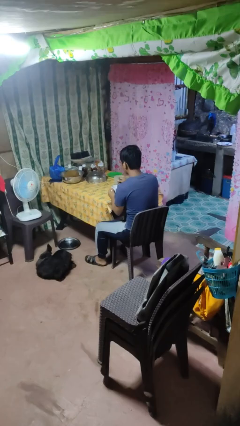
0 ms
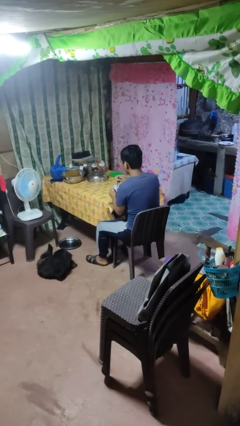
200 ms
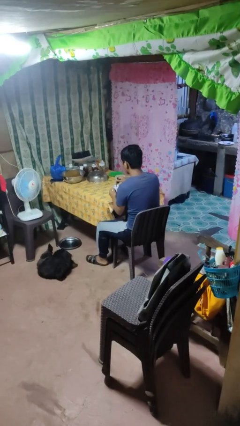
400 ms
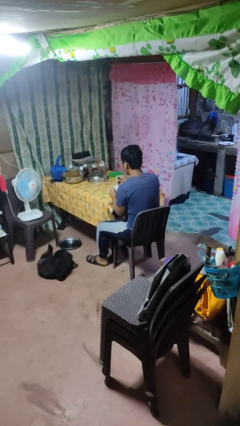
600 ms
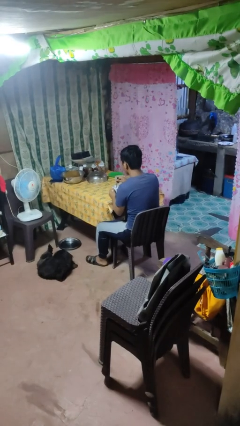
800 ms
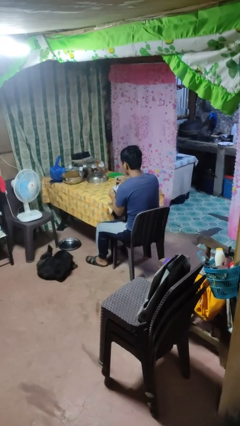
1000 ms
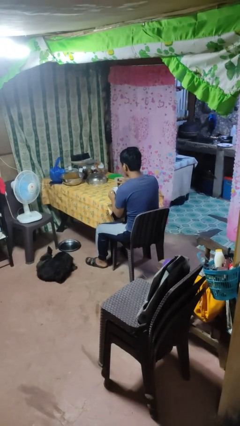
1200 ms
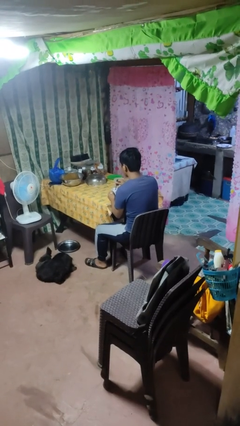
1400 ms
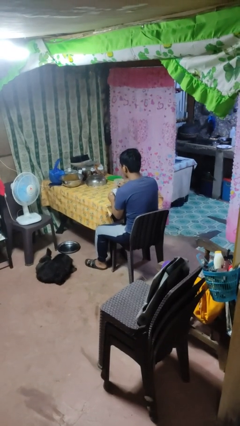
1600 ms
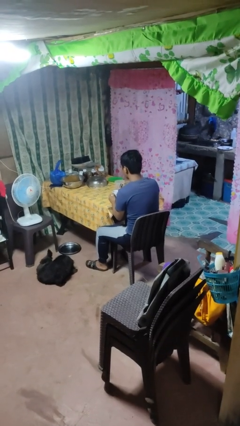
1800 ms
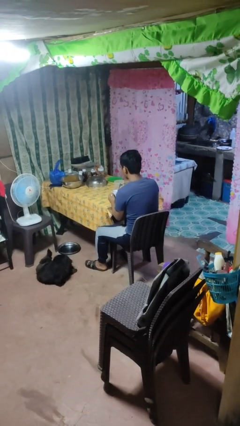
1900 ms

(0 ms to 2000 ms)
person stirs mug

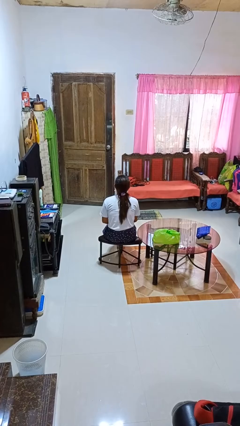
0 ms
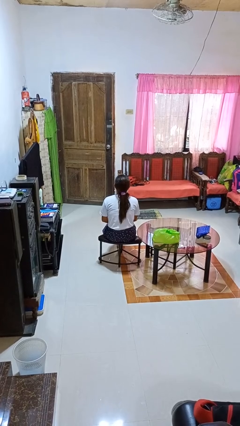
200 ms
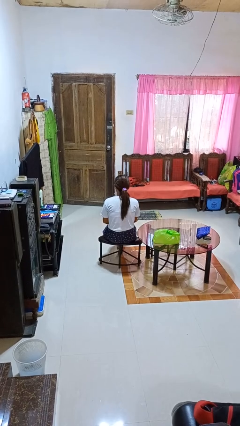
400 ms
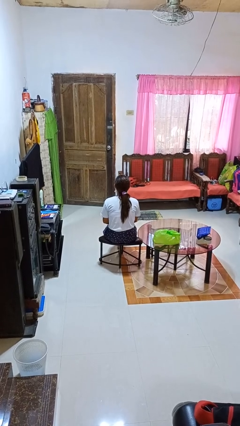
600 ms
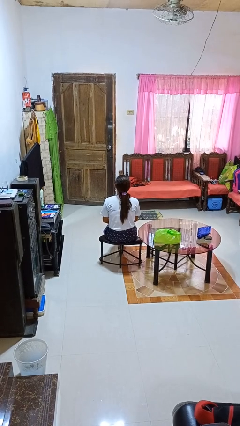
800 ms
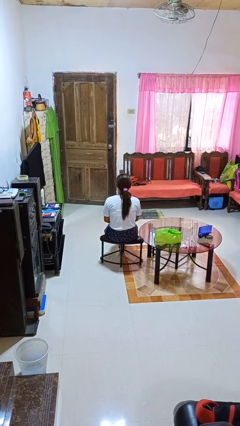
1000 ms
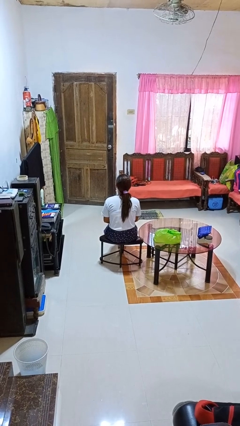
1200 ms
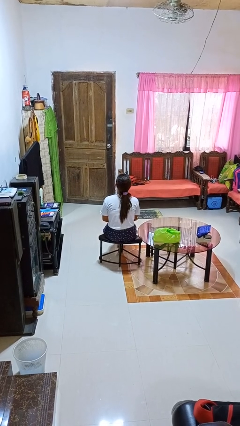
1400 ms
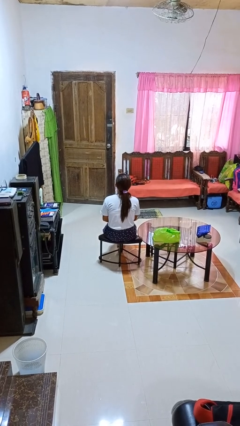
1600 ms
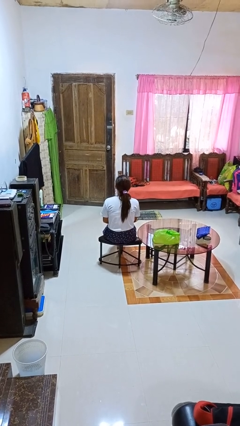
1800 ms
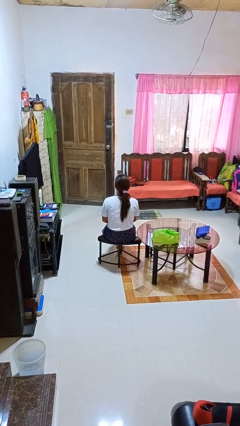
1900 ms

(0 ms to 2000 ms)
person nods head

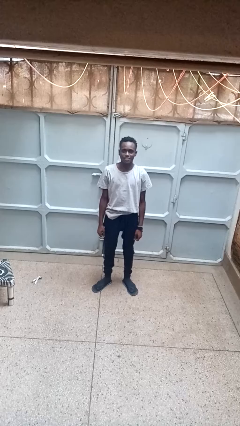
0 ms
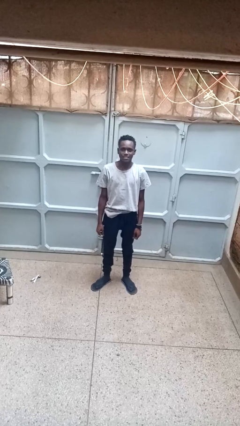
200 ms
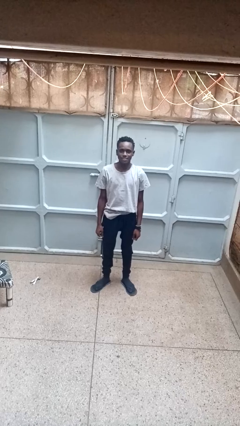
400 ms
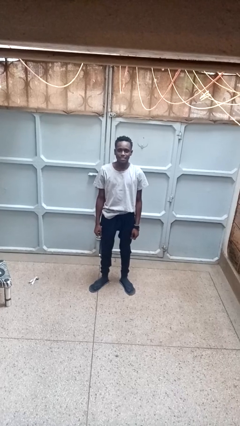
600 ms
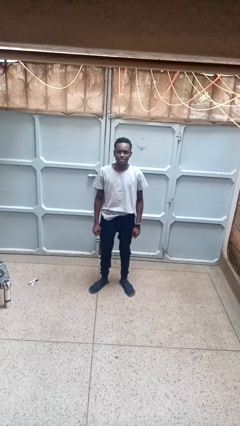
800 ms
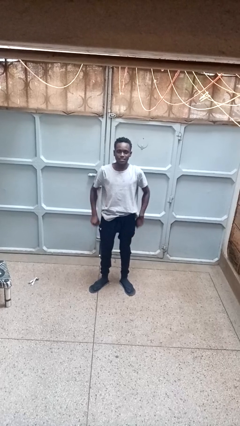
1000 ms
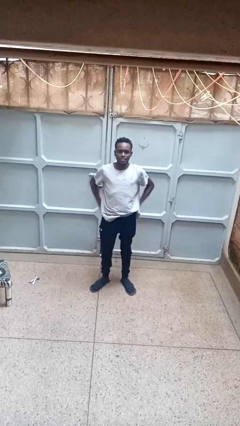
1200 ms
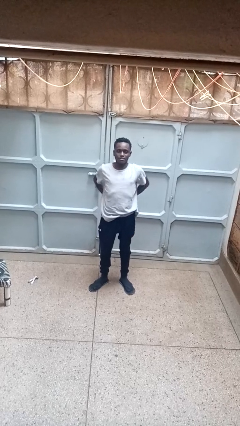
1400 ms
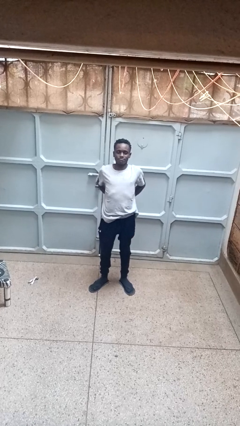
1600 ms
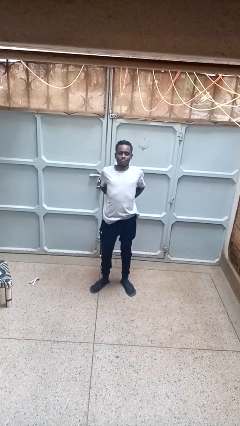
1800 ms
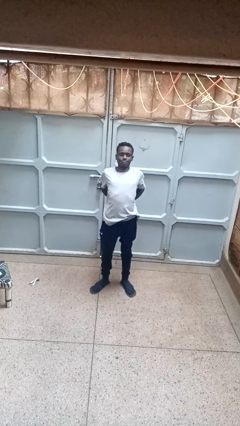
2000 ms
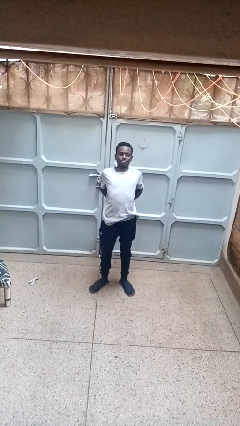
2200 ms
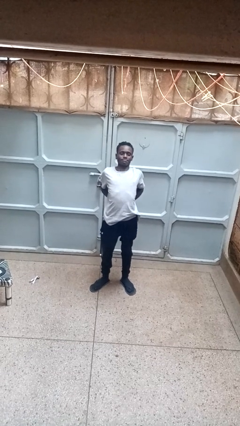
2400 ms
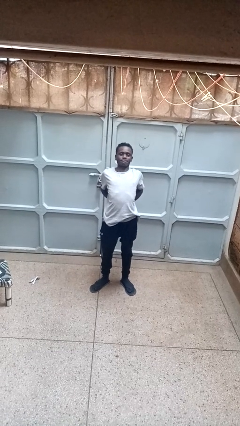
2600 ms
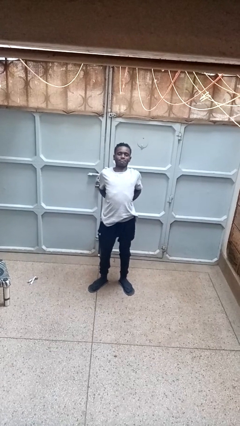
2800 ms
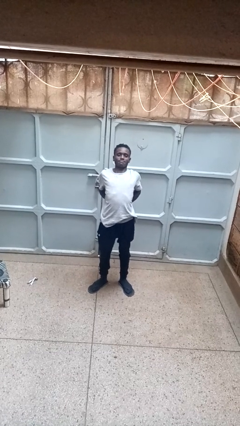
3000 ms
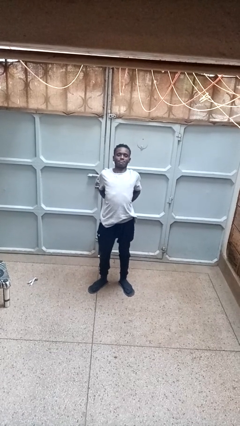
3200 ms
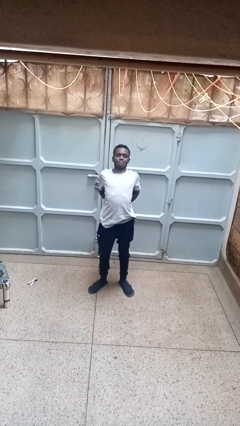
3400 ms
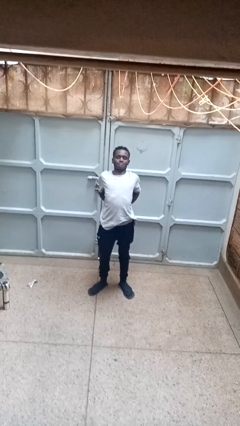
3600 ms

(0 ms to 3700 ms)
person stretches back

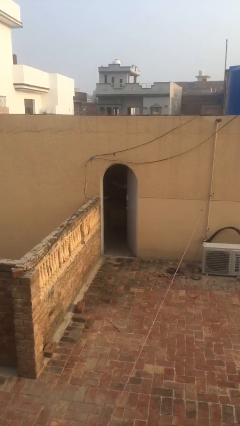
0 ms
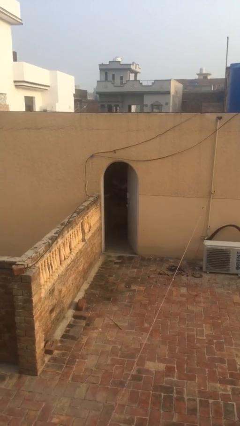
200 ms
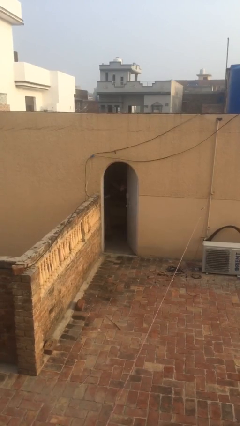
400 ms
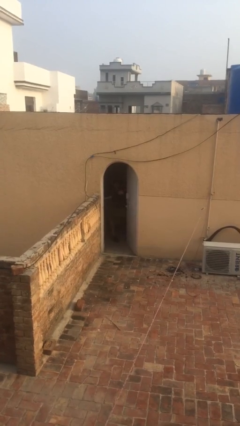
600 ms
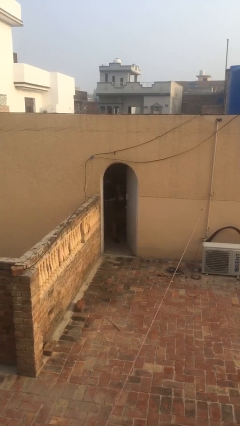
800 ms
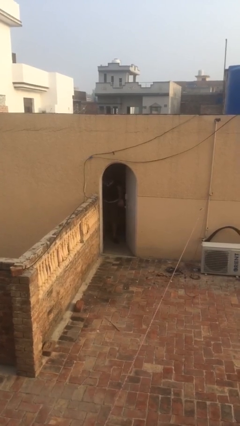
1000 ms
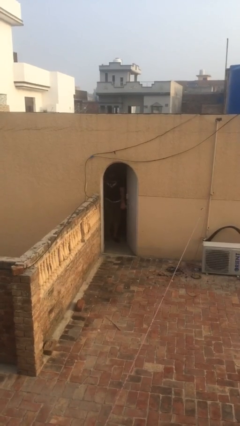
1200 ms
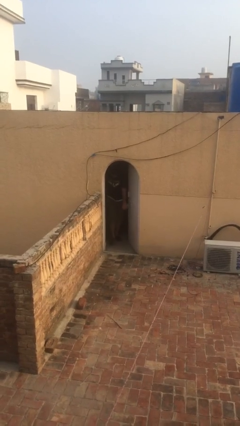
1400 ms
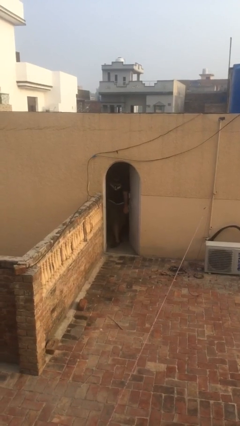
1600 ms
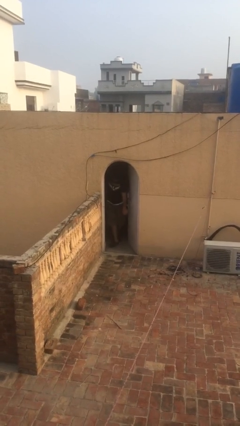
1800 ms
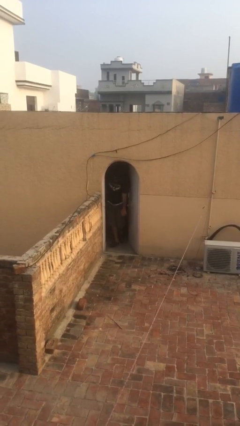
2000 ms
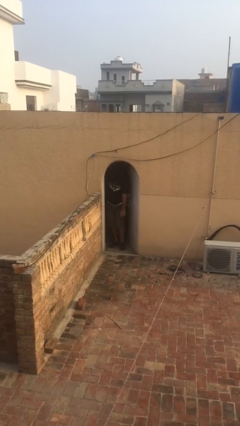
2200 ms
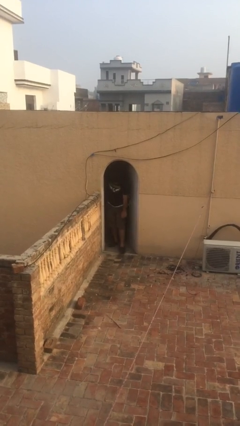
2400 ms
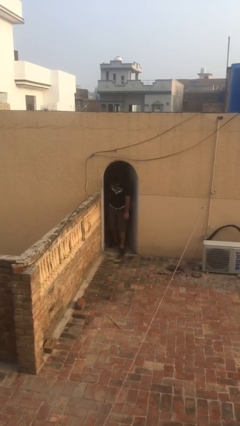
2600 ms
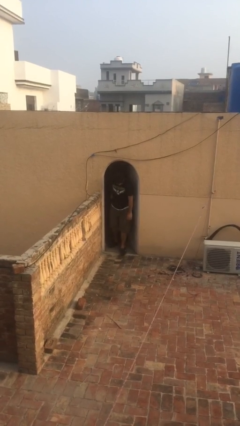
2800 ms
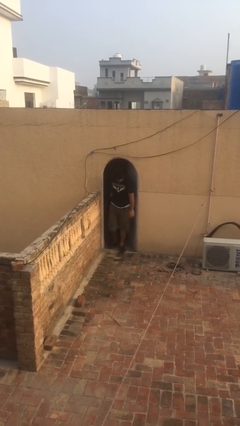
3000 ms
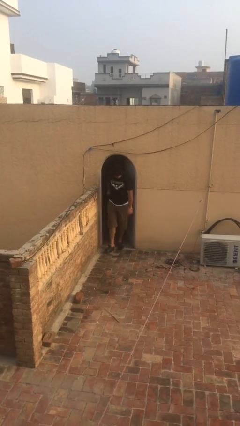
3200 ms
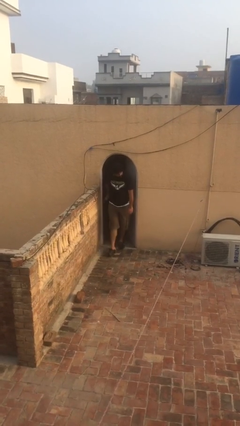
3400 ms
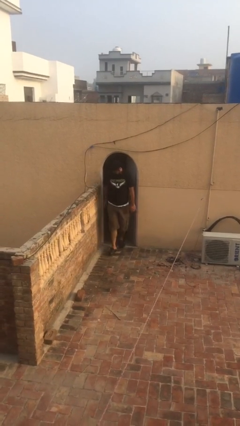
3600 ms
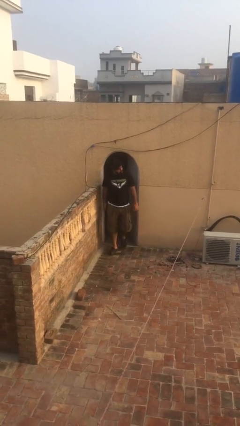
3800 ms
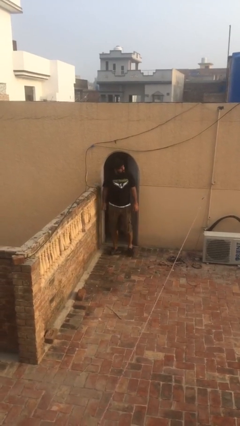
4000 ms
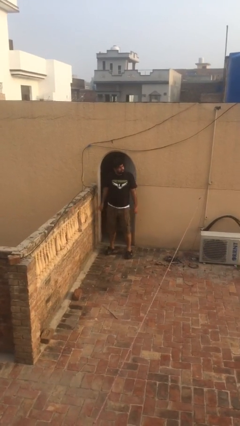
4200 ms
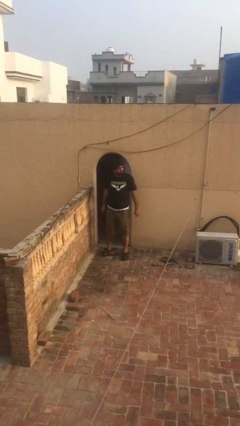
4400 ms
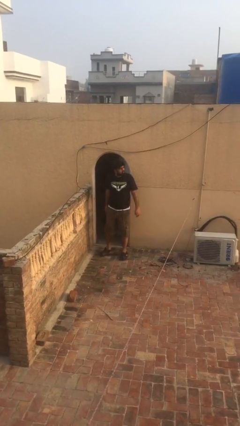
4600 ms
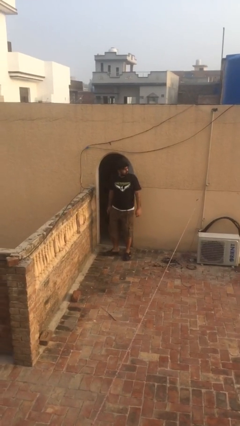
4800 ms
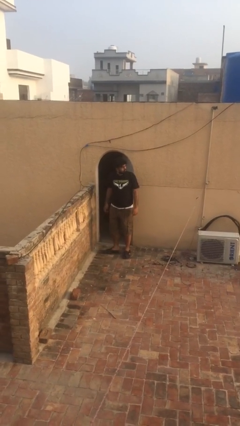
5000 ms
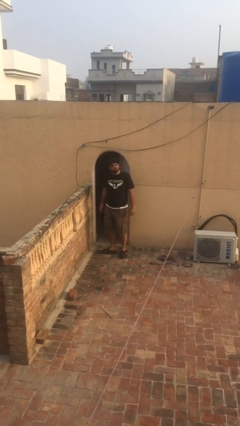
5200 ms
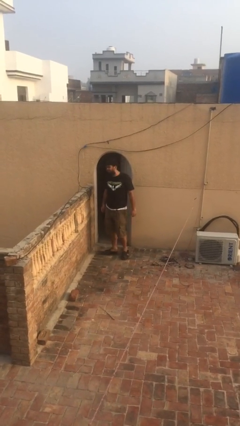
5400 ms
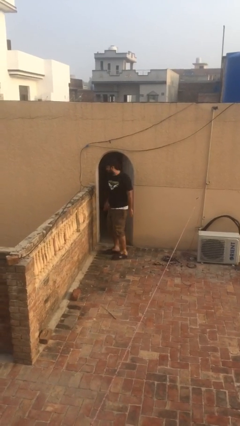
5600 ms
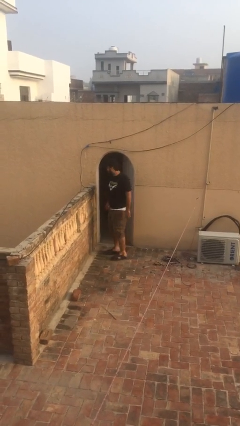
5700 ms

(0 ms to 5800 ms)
person enters scene through structure

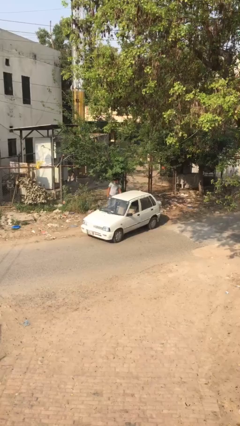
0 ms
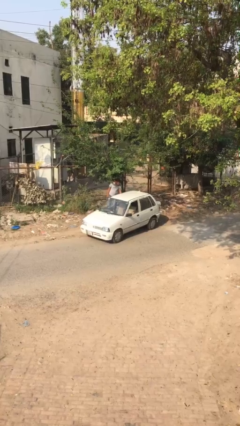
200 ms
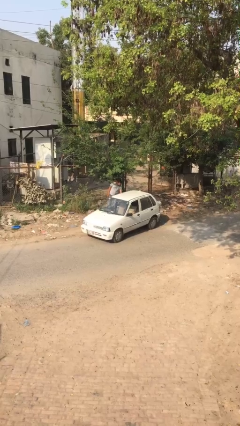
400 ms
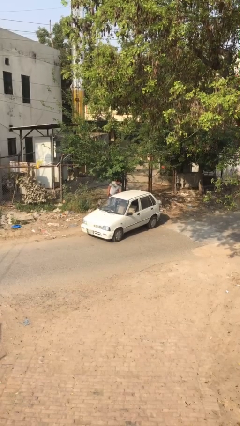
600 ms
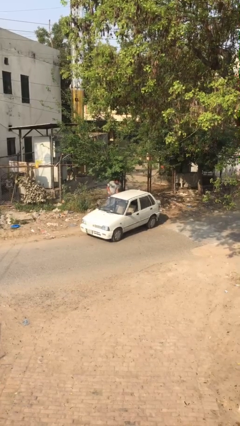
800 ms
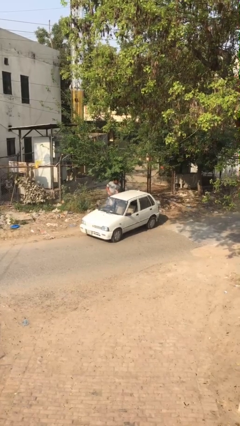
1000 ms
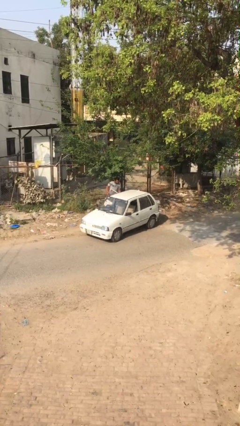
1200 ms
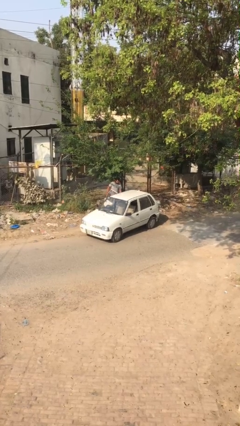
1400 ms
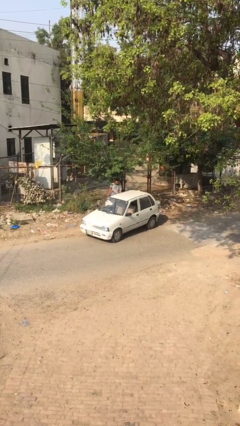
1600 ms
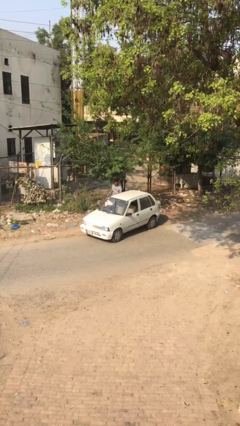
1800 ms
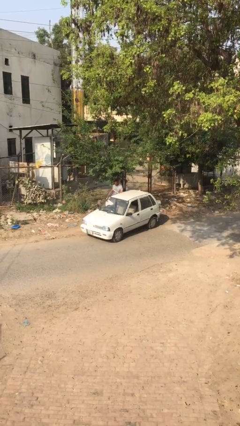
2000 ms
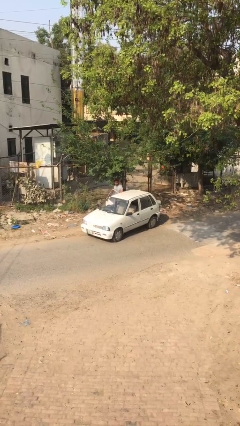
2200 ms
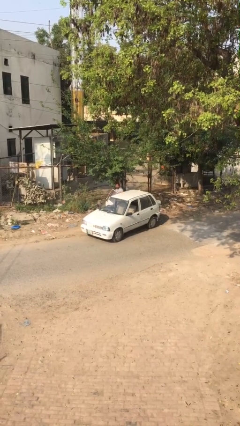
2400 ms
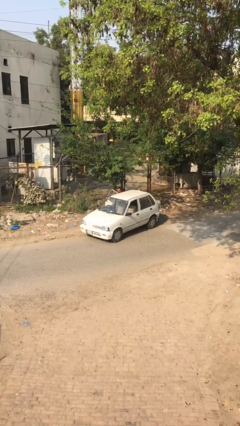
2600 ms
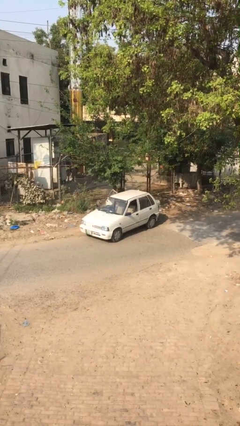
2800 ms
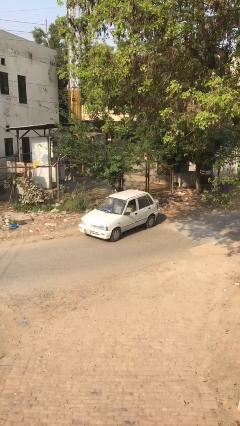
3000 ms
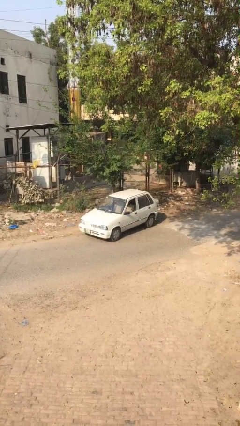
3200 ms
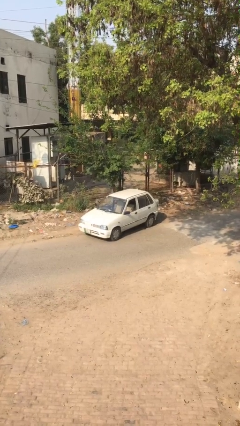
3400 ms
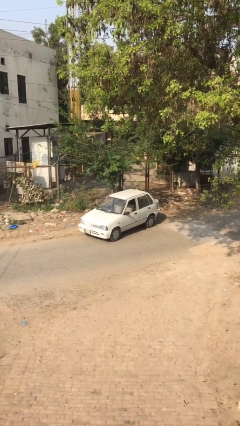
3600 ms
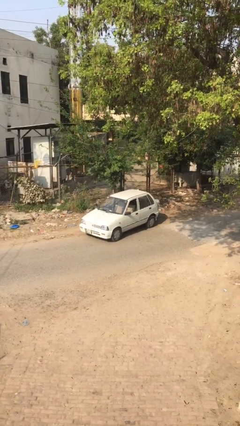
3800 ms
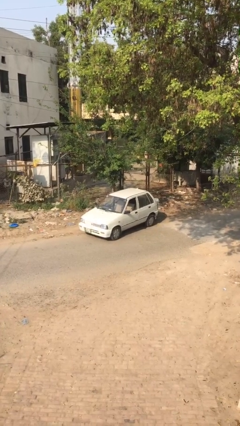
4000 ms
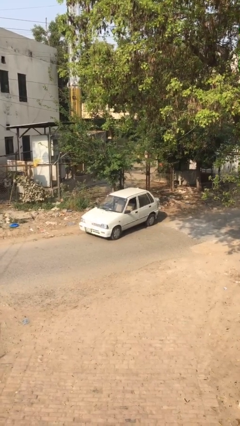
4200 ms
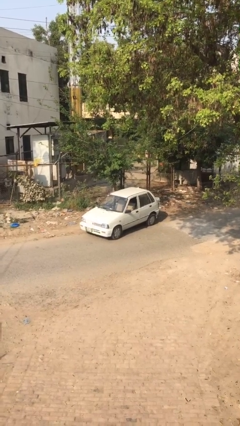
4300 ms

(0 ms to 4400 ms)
car picks up person

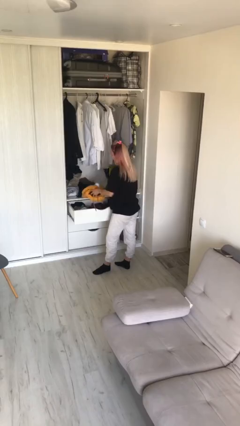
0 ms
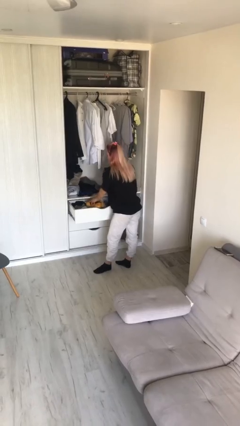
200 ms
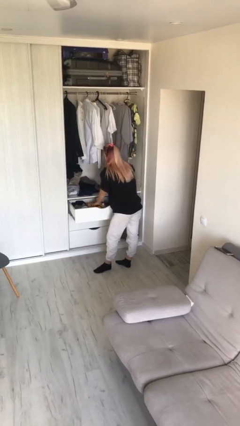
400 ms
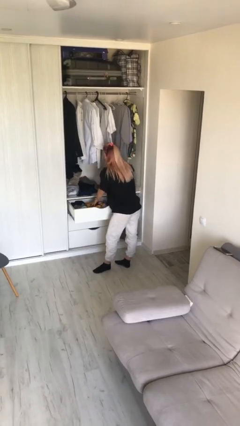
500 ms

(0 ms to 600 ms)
person puts clothes into dresser
